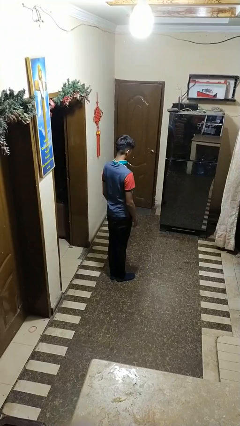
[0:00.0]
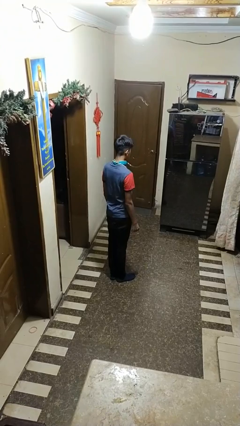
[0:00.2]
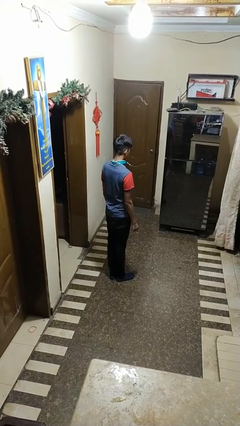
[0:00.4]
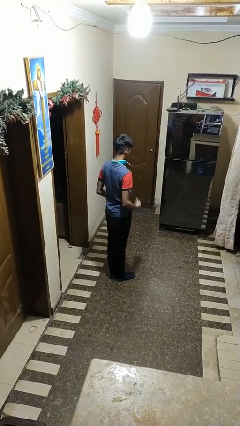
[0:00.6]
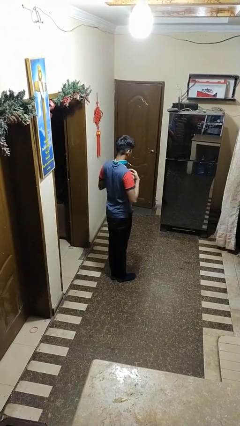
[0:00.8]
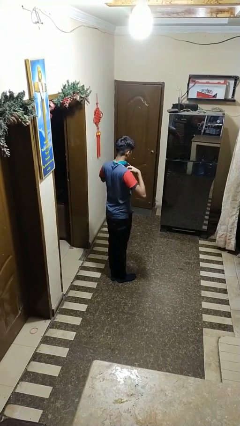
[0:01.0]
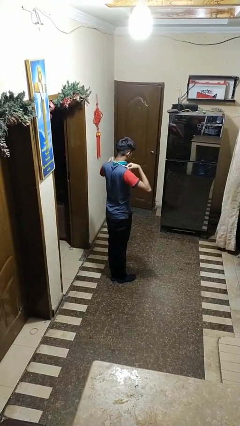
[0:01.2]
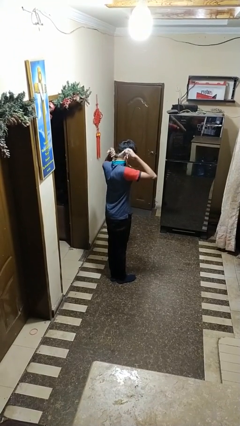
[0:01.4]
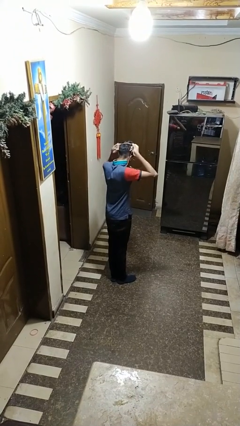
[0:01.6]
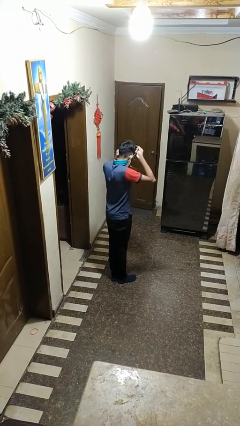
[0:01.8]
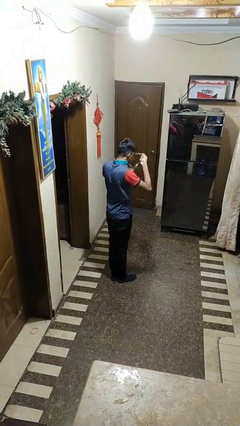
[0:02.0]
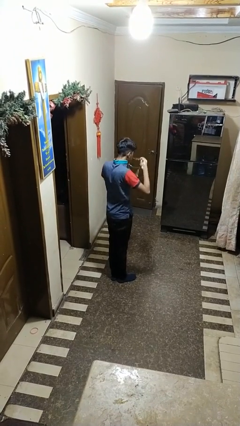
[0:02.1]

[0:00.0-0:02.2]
person takes off necklace

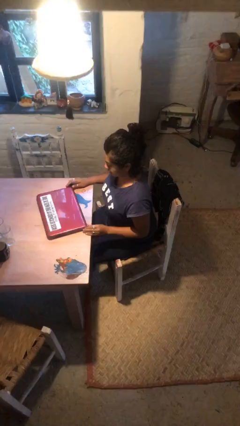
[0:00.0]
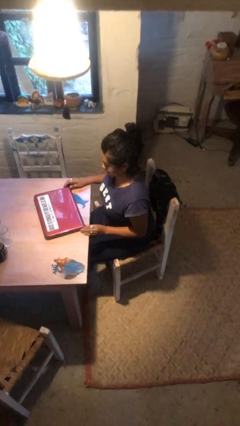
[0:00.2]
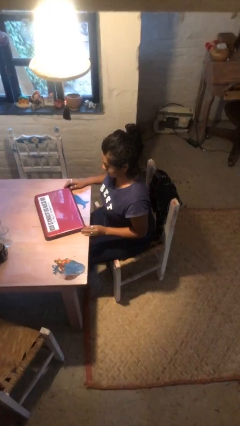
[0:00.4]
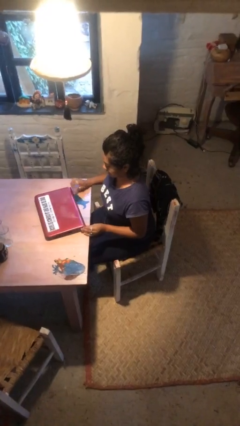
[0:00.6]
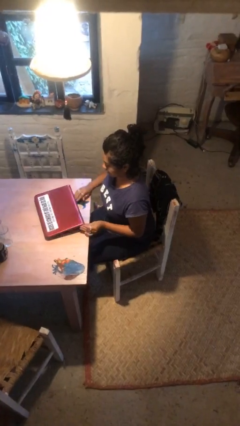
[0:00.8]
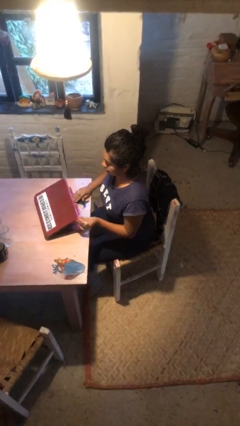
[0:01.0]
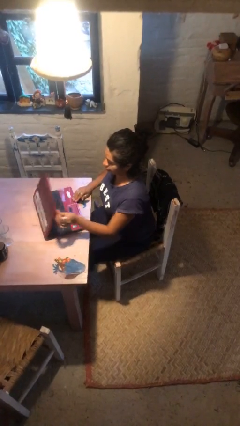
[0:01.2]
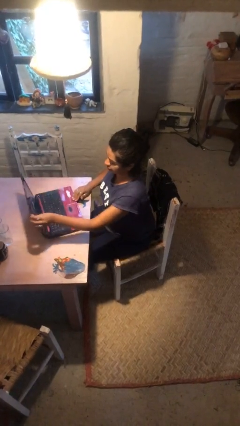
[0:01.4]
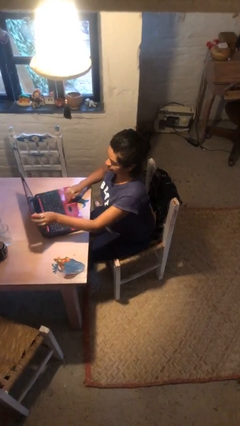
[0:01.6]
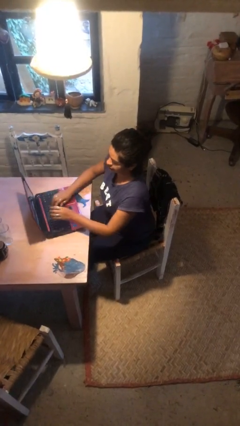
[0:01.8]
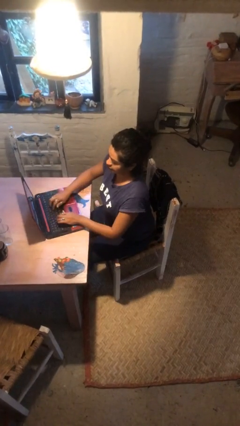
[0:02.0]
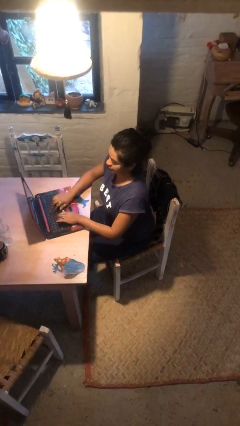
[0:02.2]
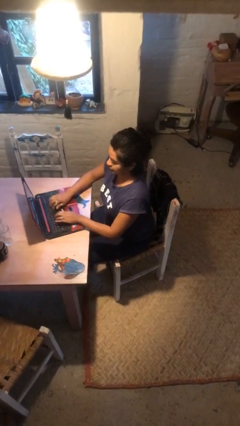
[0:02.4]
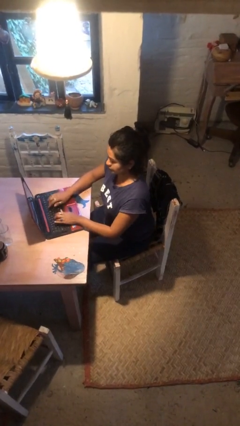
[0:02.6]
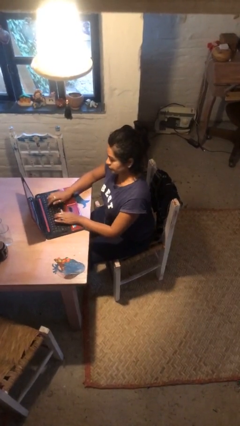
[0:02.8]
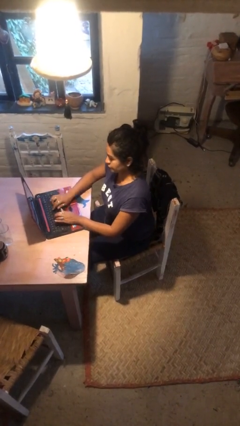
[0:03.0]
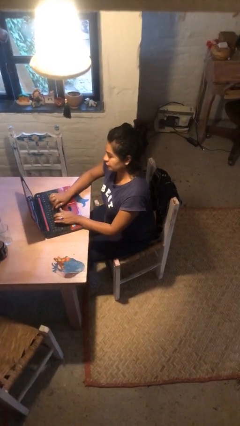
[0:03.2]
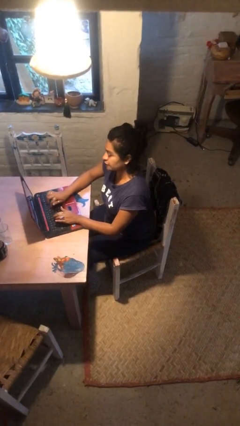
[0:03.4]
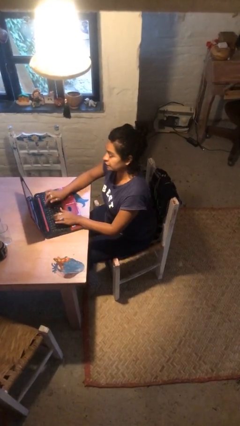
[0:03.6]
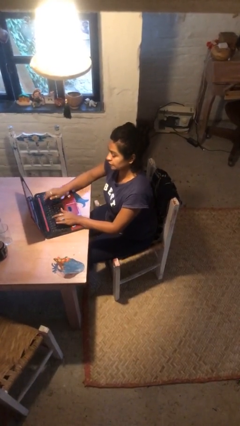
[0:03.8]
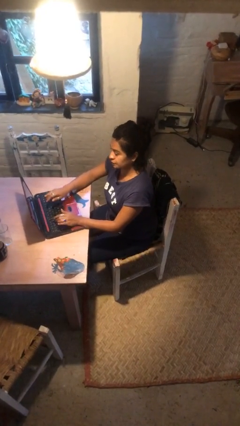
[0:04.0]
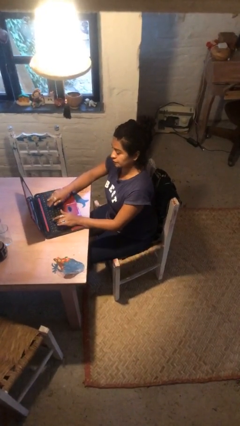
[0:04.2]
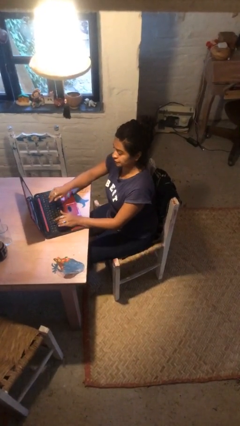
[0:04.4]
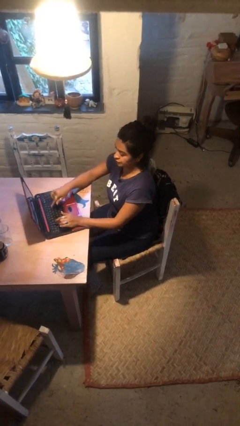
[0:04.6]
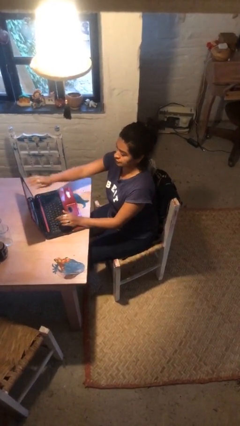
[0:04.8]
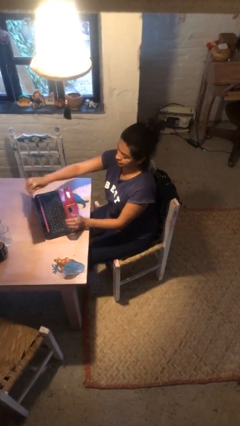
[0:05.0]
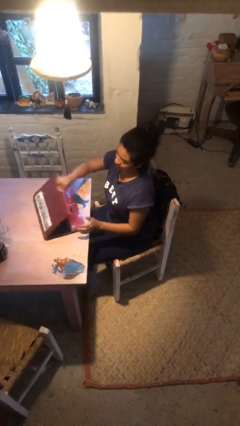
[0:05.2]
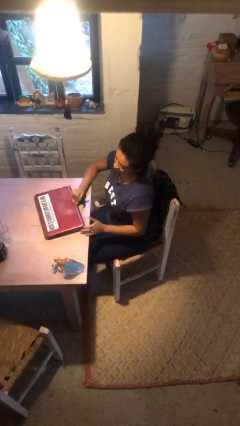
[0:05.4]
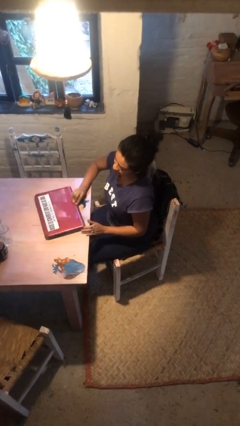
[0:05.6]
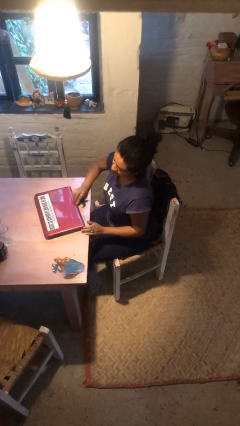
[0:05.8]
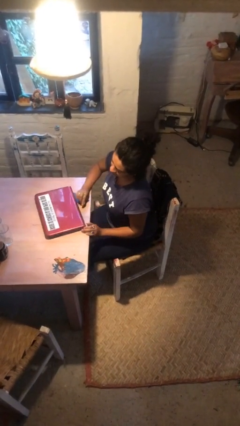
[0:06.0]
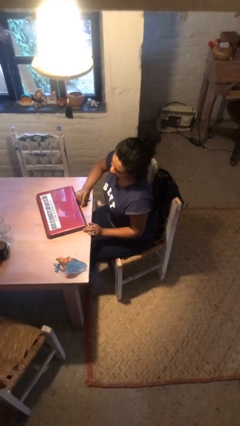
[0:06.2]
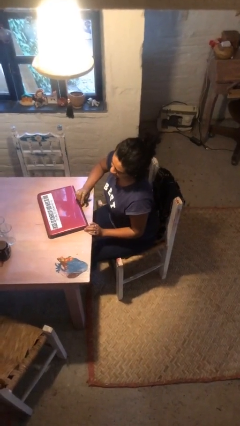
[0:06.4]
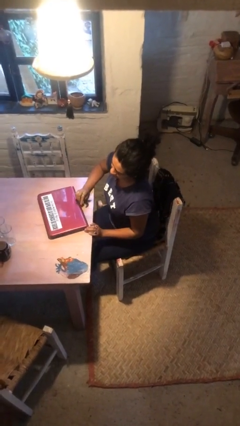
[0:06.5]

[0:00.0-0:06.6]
person interacts with laptop

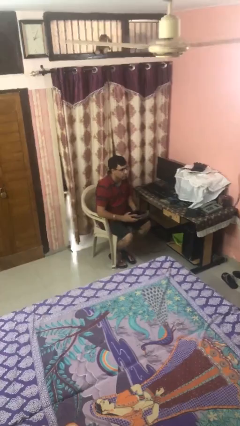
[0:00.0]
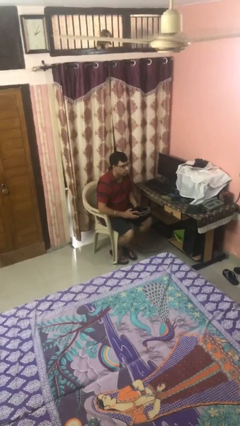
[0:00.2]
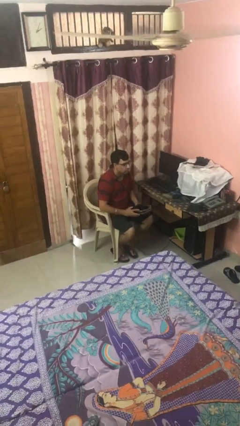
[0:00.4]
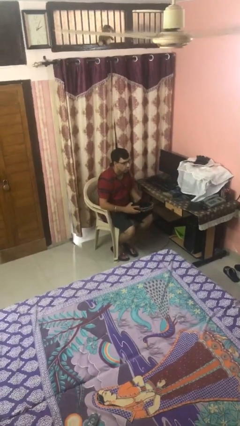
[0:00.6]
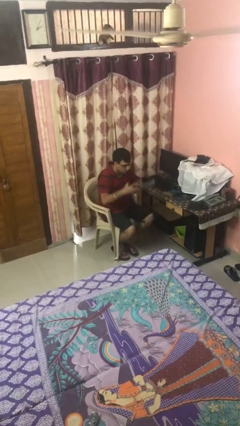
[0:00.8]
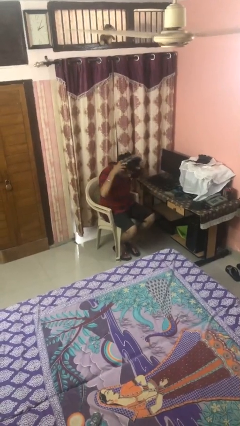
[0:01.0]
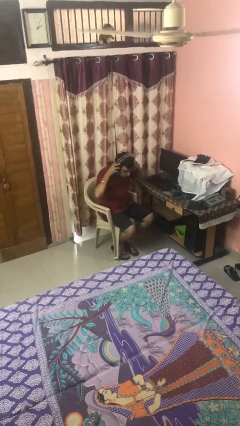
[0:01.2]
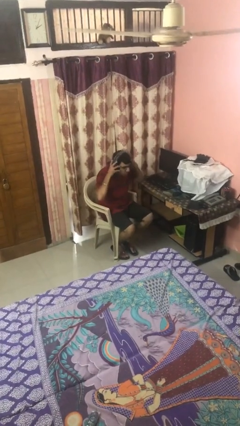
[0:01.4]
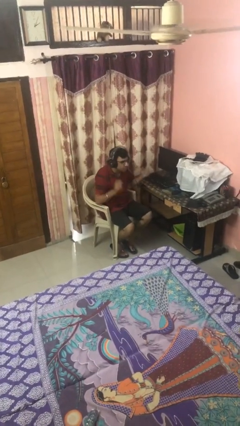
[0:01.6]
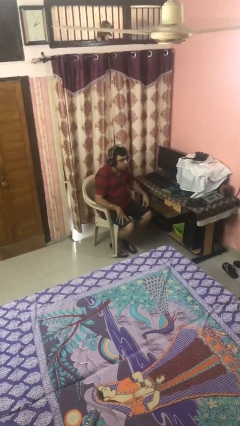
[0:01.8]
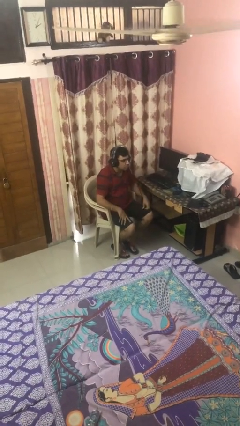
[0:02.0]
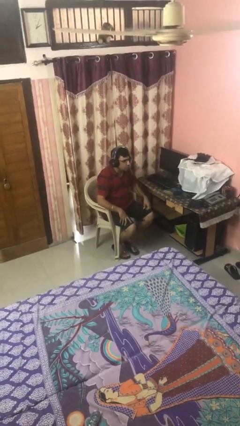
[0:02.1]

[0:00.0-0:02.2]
person puts on headphones

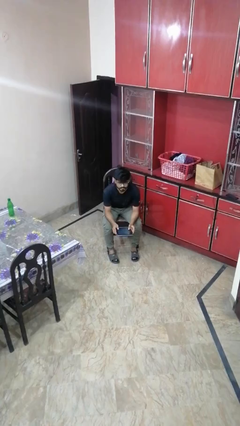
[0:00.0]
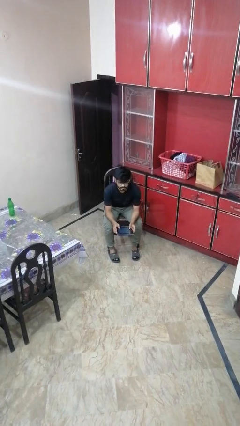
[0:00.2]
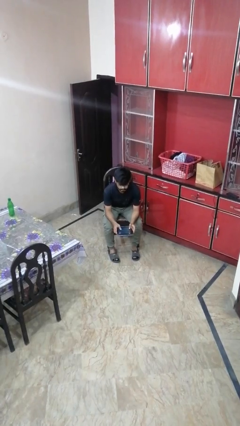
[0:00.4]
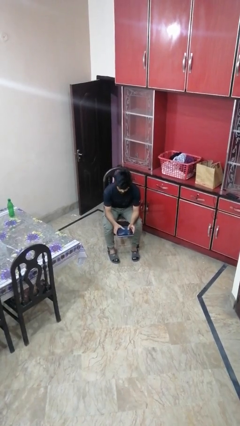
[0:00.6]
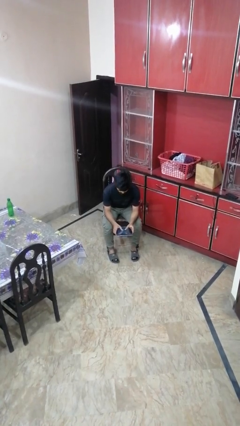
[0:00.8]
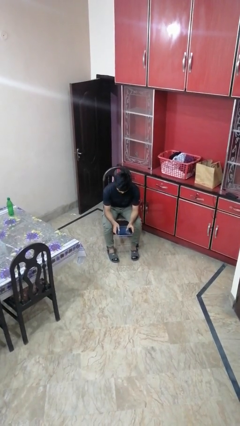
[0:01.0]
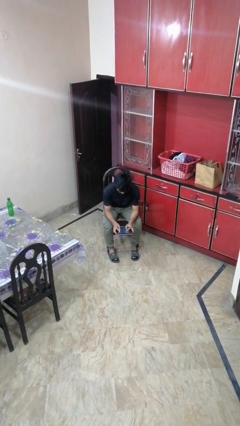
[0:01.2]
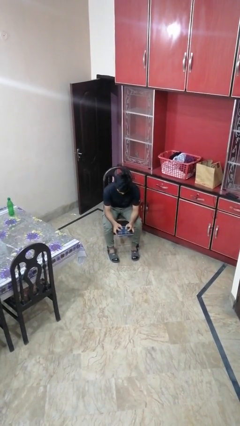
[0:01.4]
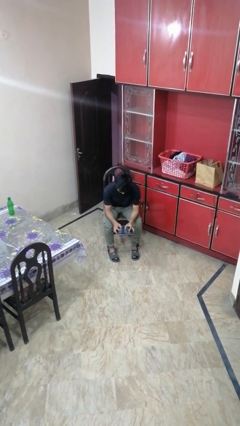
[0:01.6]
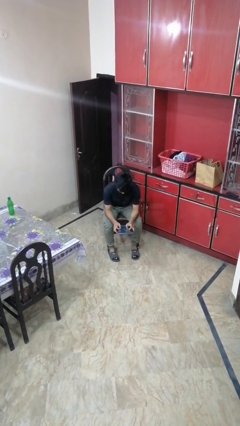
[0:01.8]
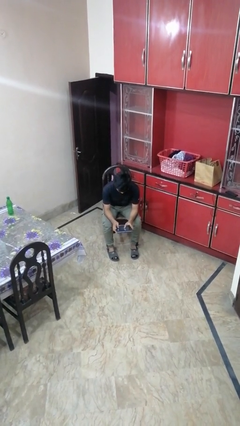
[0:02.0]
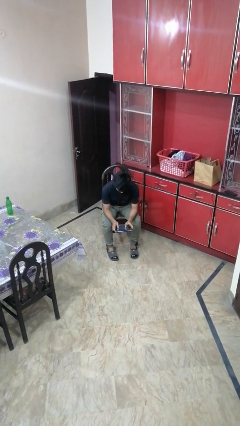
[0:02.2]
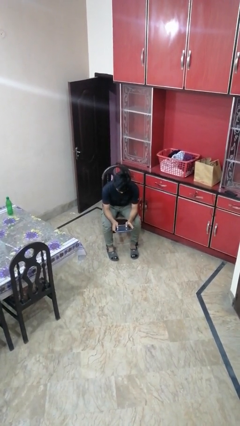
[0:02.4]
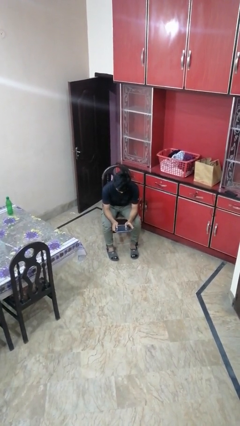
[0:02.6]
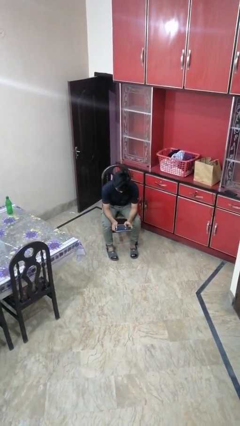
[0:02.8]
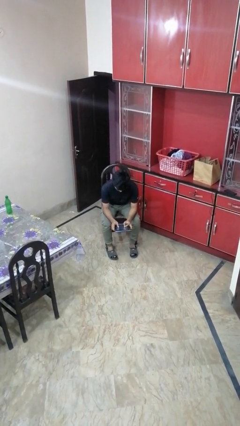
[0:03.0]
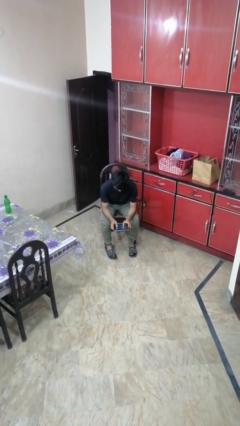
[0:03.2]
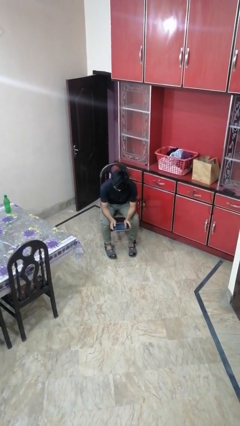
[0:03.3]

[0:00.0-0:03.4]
person interacts with tablet

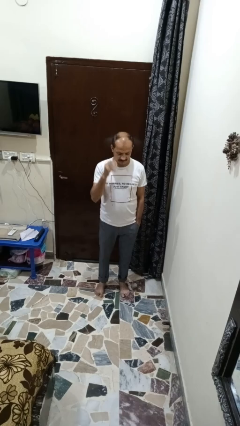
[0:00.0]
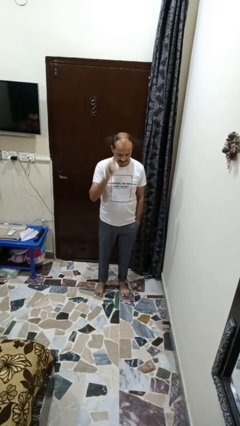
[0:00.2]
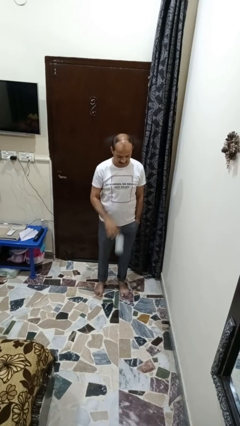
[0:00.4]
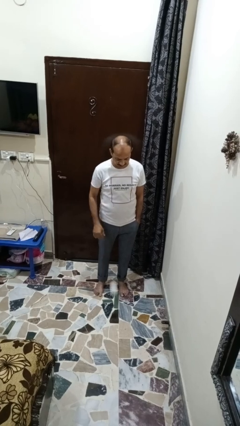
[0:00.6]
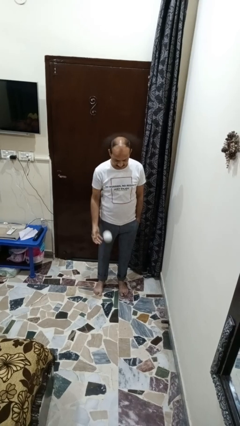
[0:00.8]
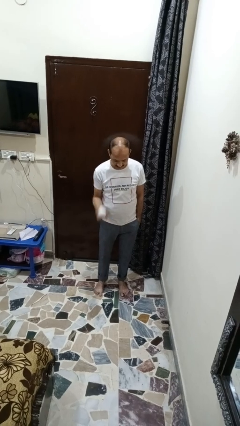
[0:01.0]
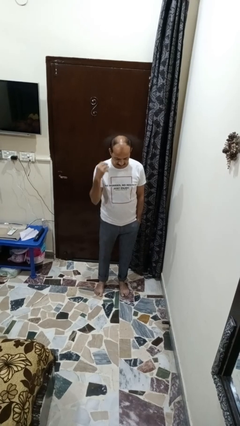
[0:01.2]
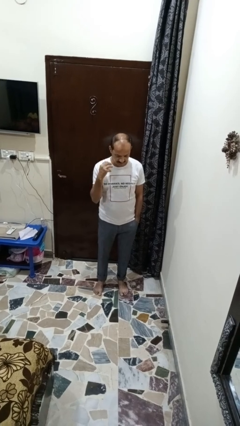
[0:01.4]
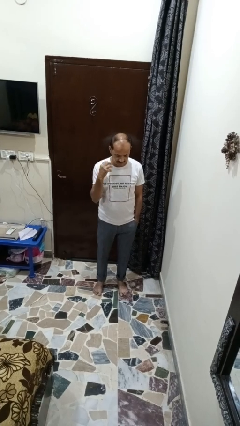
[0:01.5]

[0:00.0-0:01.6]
person bounces ball on floor

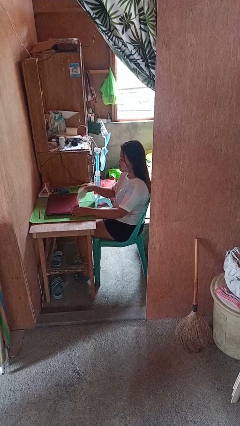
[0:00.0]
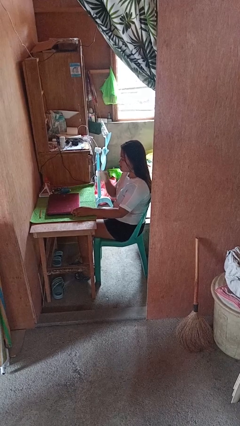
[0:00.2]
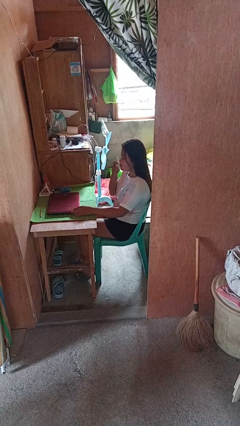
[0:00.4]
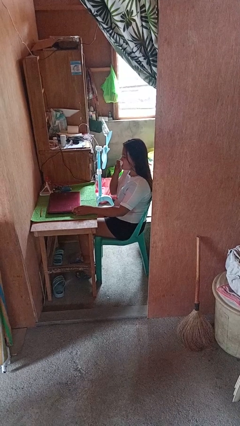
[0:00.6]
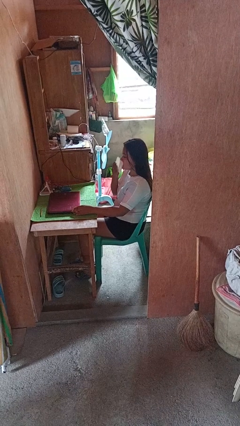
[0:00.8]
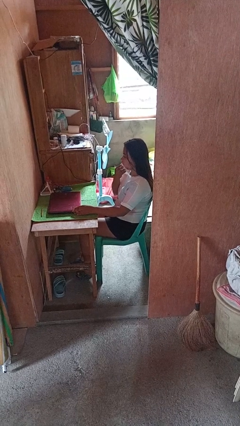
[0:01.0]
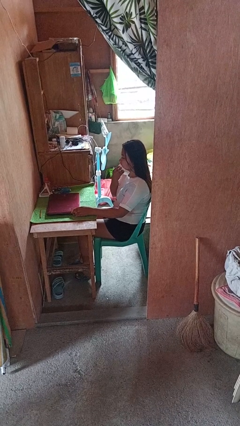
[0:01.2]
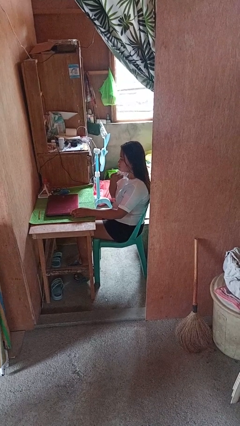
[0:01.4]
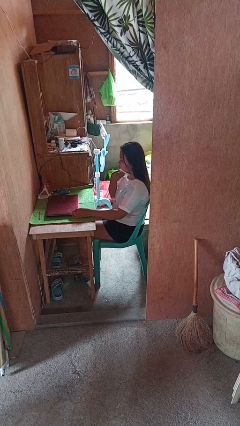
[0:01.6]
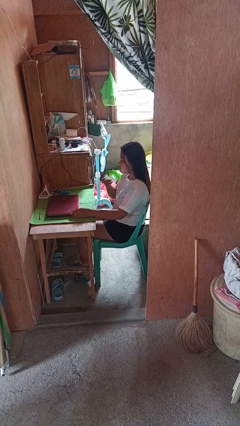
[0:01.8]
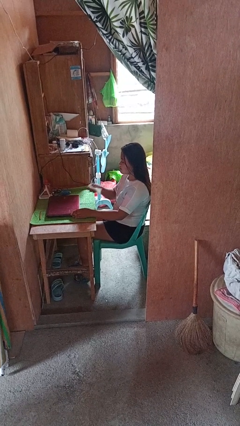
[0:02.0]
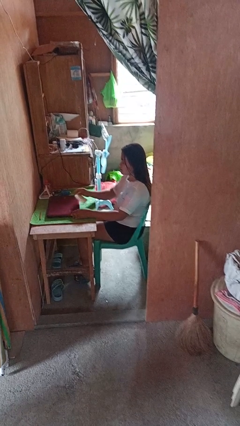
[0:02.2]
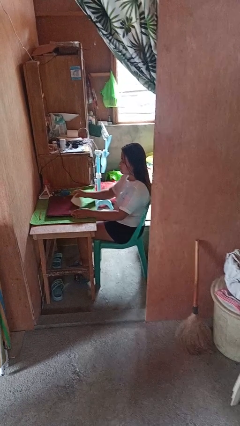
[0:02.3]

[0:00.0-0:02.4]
person wipes mouth with napkin
